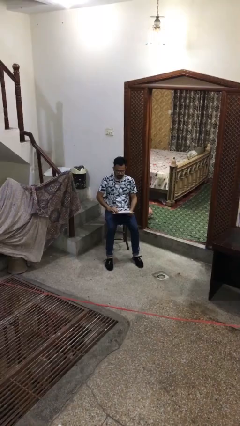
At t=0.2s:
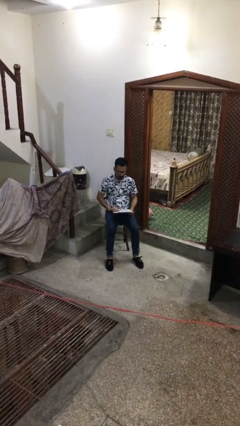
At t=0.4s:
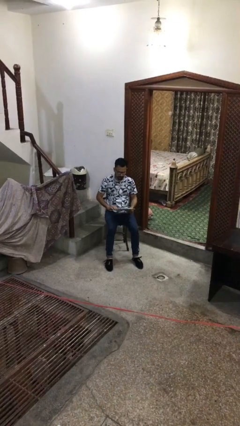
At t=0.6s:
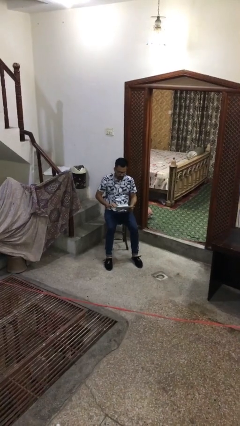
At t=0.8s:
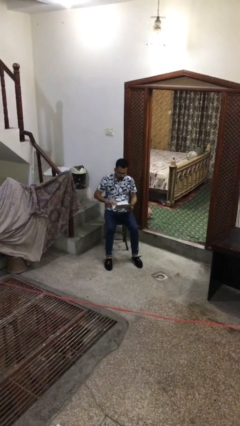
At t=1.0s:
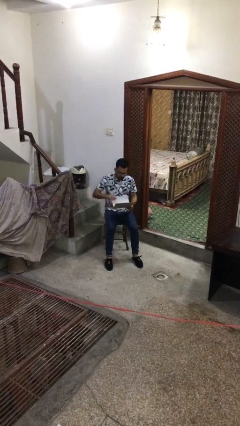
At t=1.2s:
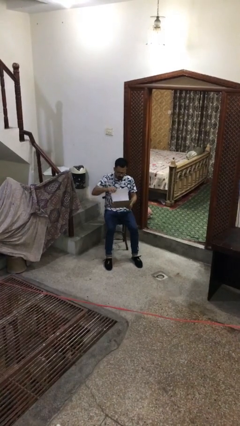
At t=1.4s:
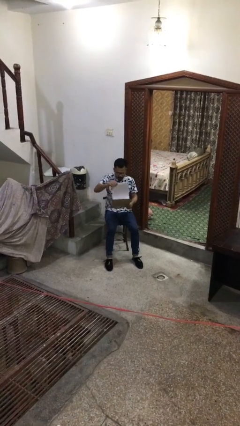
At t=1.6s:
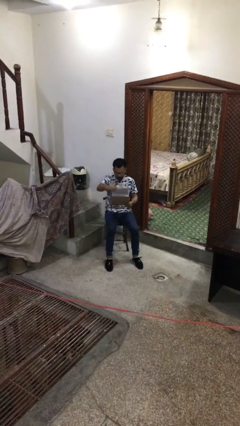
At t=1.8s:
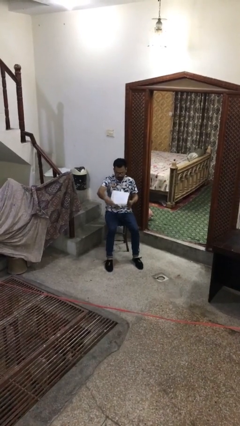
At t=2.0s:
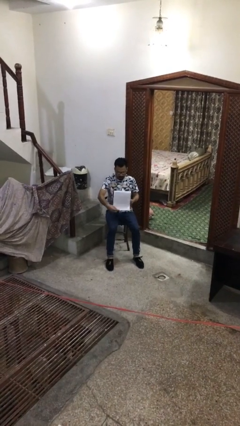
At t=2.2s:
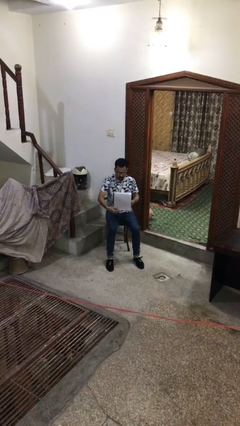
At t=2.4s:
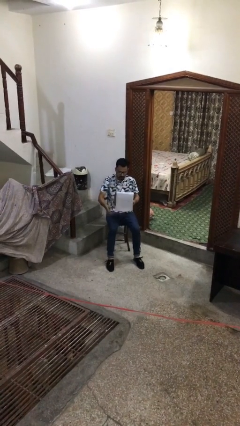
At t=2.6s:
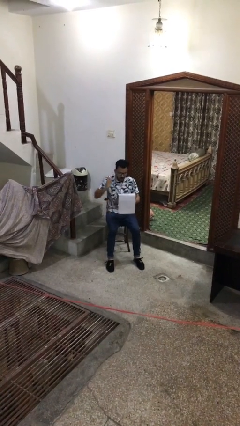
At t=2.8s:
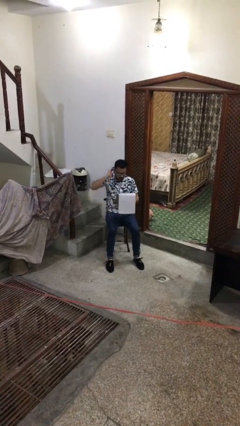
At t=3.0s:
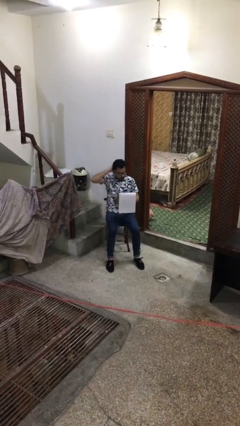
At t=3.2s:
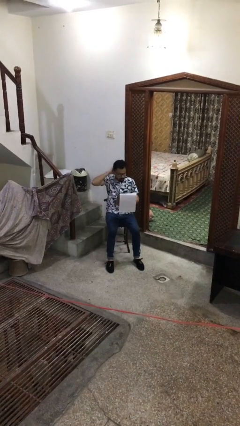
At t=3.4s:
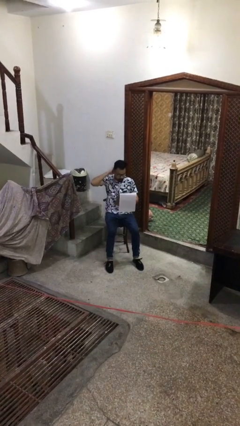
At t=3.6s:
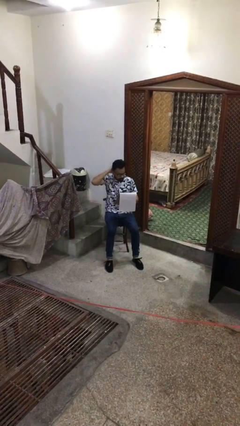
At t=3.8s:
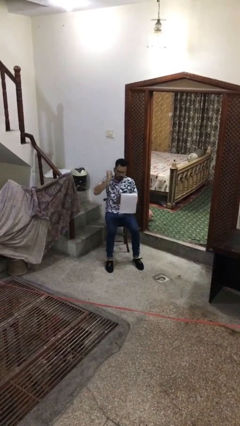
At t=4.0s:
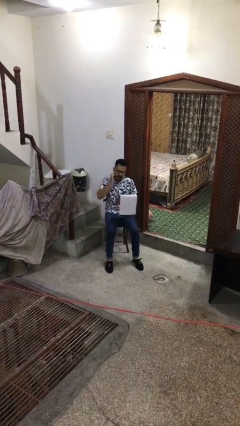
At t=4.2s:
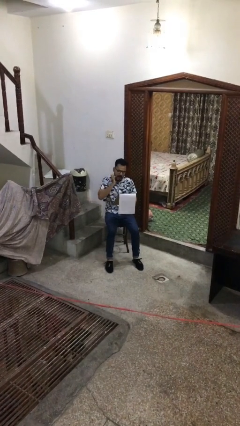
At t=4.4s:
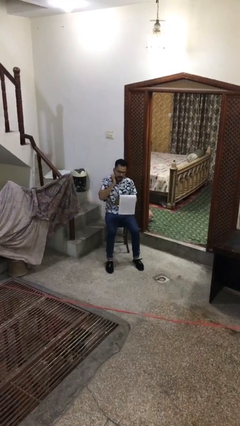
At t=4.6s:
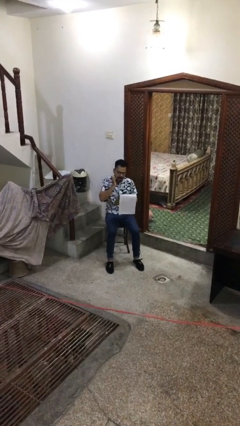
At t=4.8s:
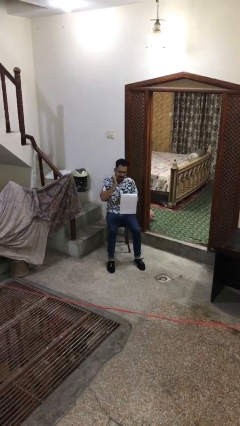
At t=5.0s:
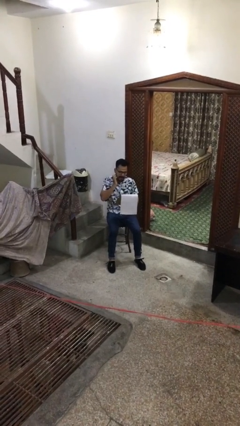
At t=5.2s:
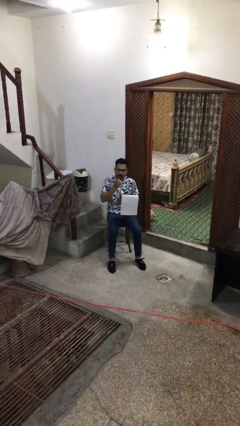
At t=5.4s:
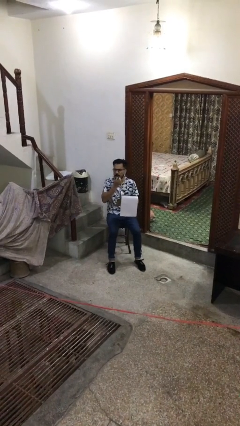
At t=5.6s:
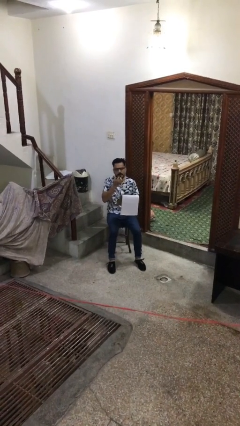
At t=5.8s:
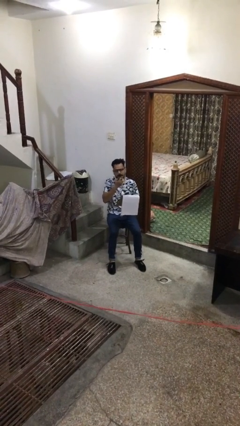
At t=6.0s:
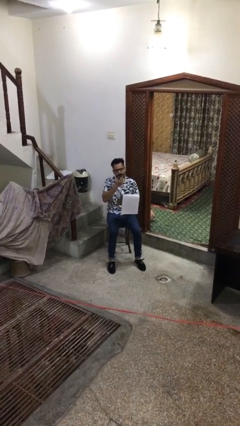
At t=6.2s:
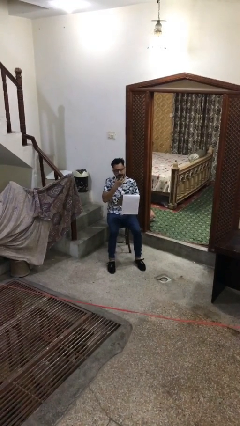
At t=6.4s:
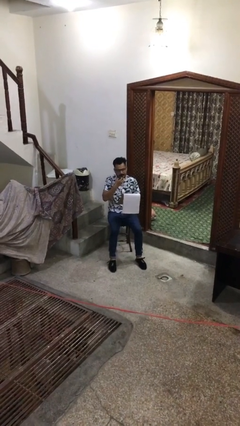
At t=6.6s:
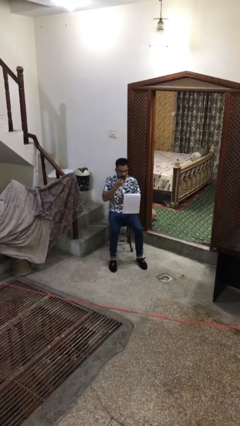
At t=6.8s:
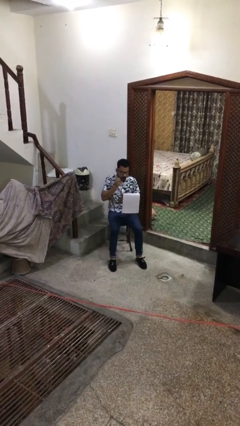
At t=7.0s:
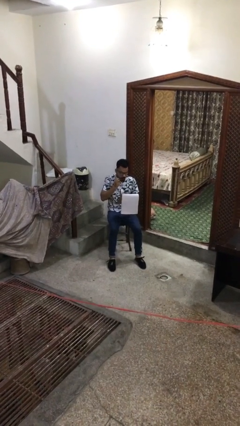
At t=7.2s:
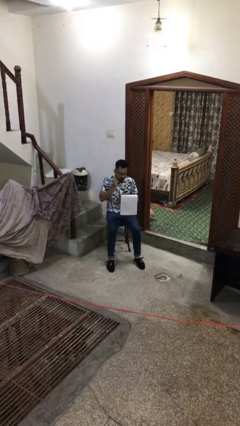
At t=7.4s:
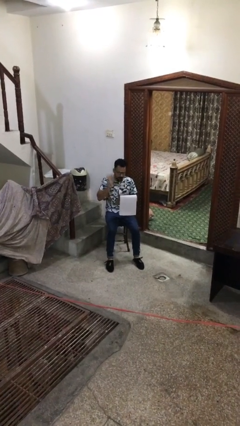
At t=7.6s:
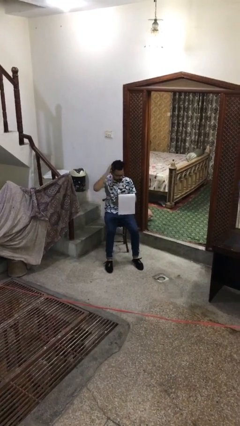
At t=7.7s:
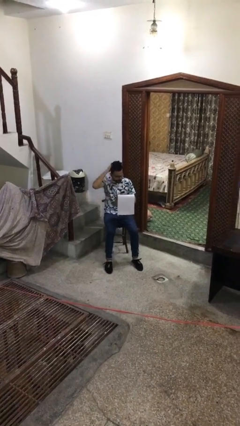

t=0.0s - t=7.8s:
person reads document

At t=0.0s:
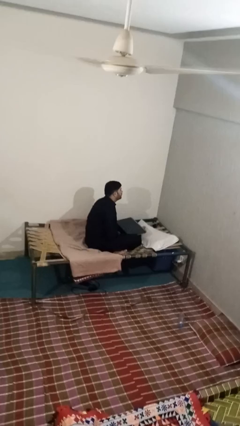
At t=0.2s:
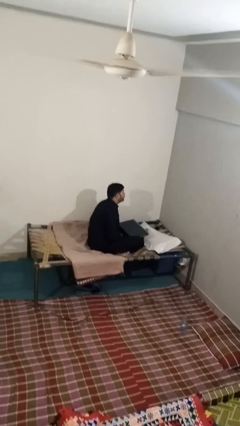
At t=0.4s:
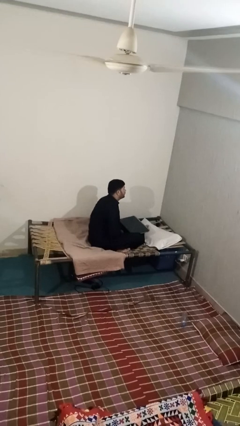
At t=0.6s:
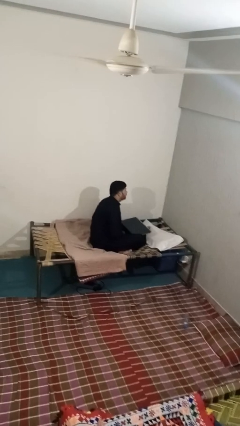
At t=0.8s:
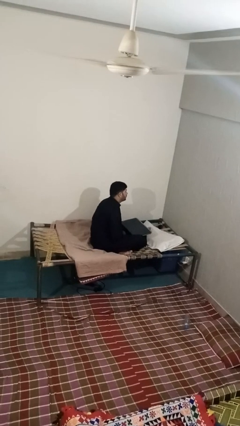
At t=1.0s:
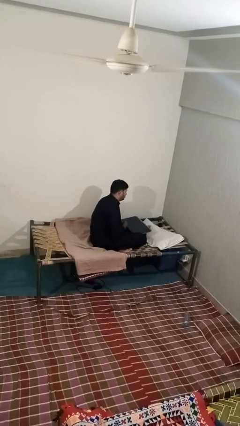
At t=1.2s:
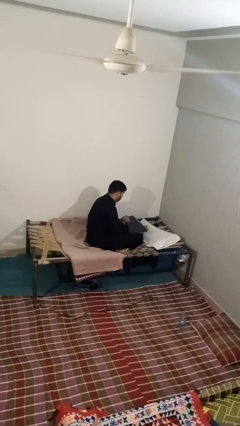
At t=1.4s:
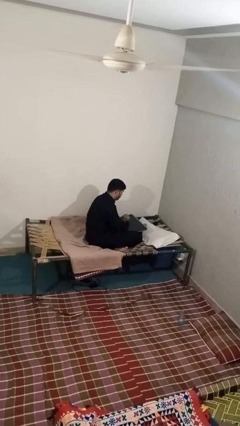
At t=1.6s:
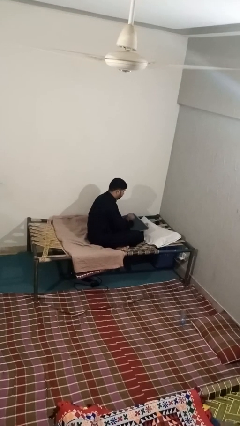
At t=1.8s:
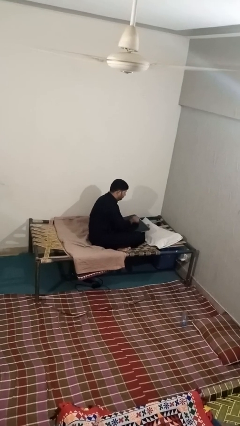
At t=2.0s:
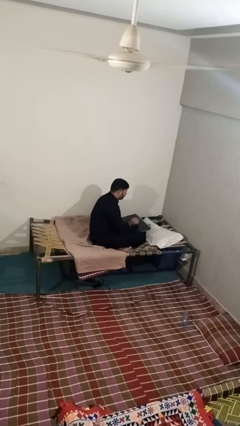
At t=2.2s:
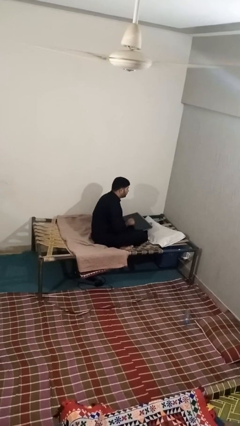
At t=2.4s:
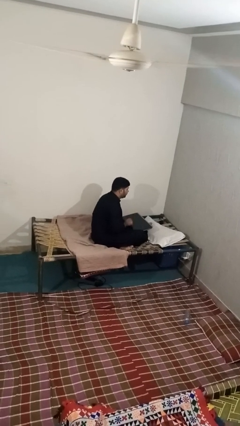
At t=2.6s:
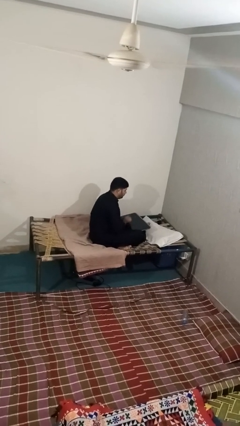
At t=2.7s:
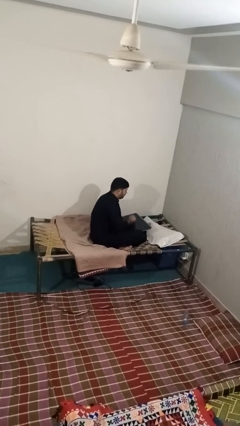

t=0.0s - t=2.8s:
person interacts with tablet

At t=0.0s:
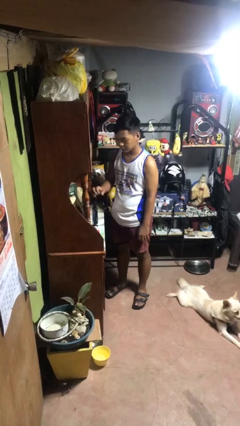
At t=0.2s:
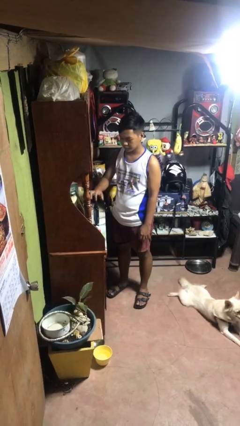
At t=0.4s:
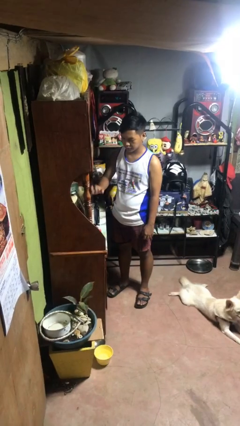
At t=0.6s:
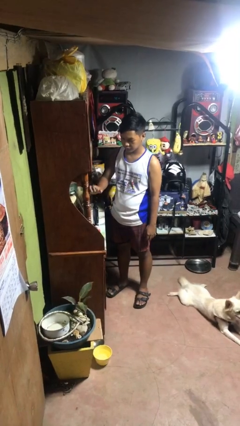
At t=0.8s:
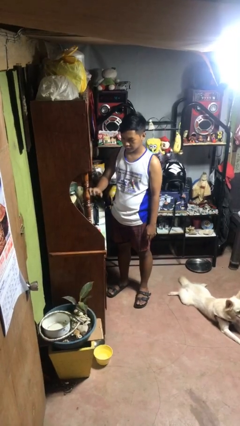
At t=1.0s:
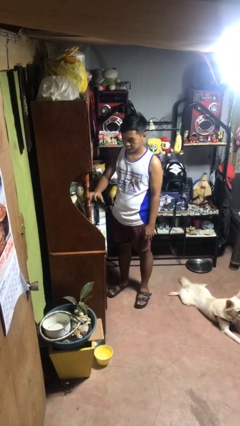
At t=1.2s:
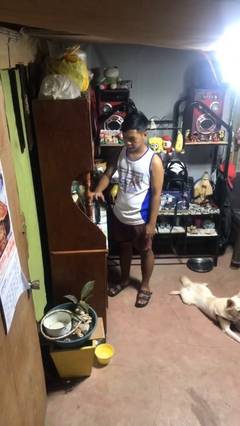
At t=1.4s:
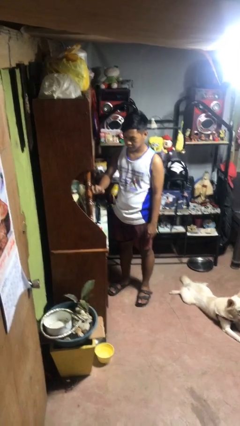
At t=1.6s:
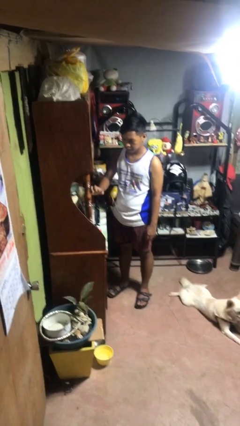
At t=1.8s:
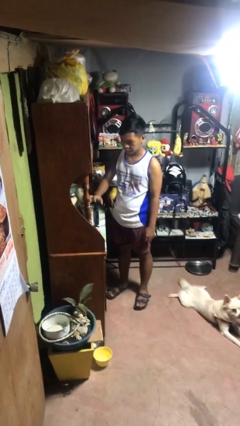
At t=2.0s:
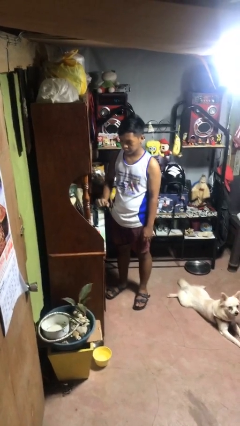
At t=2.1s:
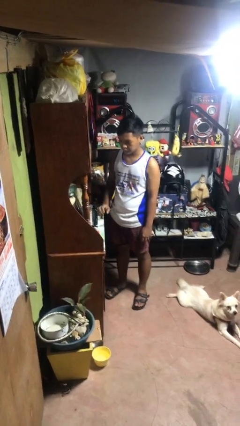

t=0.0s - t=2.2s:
person taps object with finger

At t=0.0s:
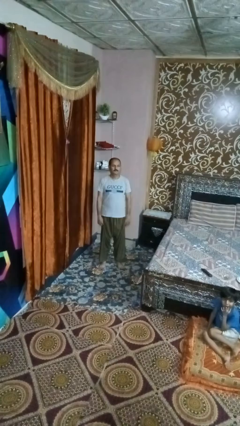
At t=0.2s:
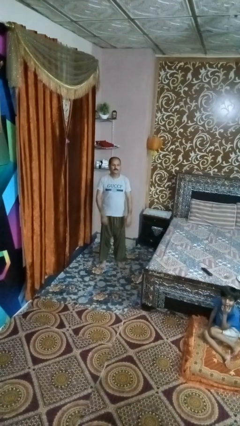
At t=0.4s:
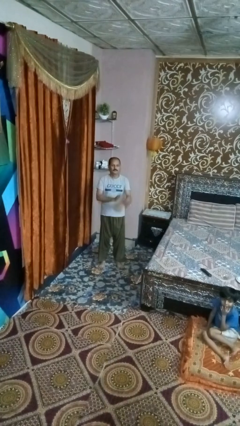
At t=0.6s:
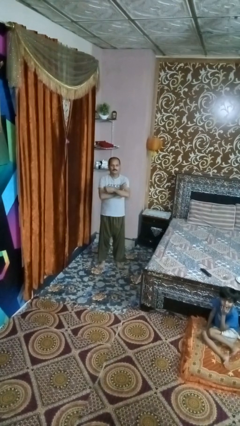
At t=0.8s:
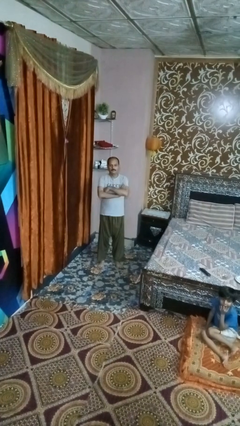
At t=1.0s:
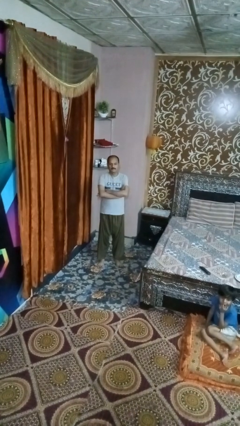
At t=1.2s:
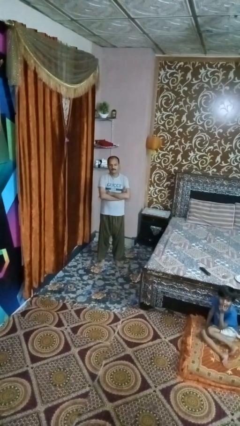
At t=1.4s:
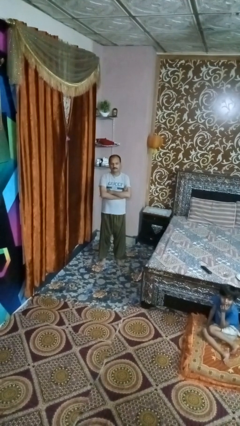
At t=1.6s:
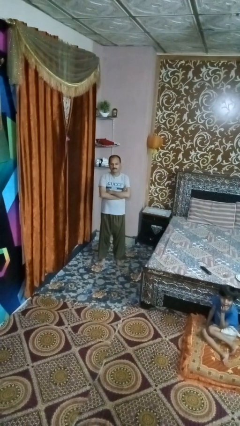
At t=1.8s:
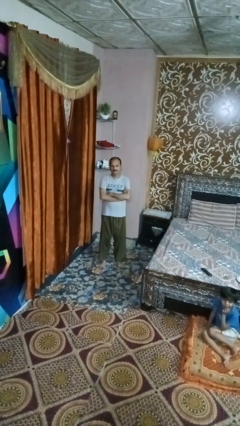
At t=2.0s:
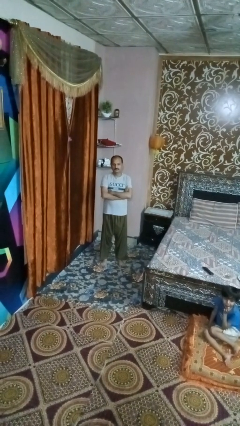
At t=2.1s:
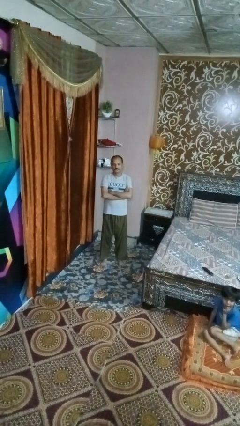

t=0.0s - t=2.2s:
person crosses arms

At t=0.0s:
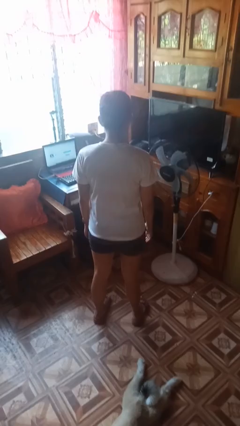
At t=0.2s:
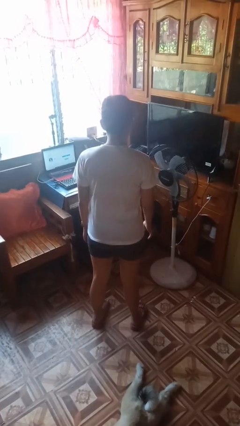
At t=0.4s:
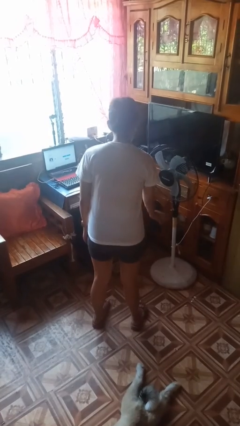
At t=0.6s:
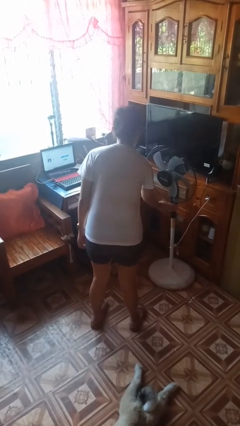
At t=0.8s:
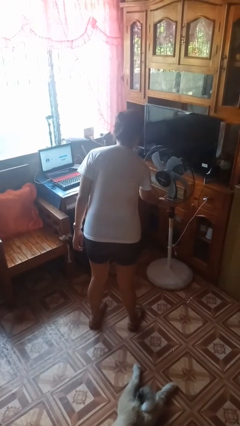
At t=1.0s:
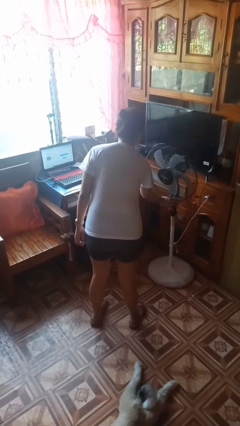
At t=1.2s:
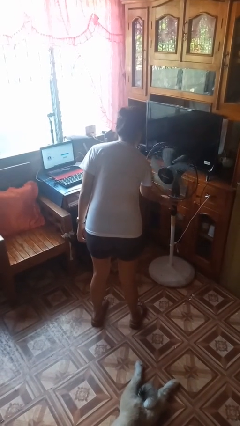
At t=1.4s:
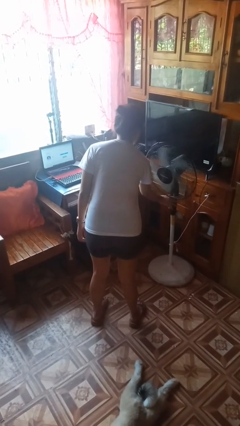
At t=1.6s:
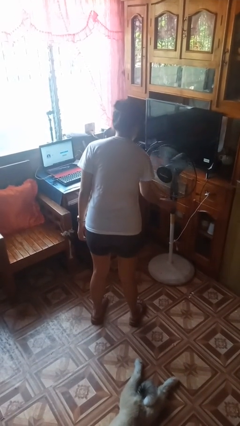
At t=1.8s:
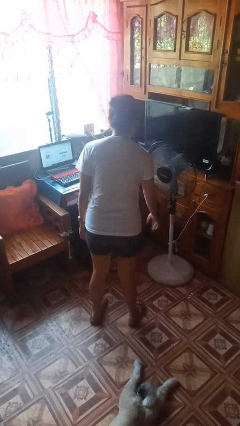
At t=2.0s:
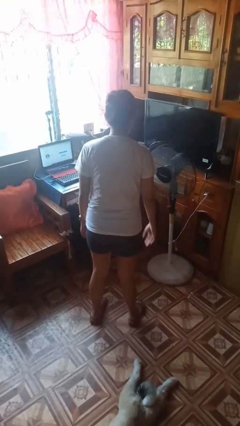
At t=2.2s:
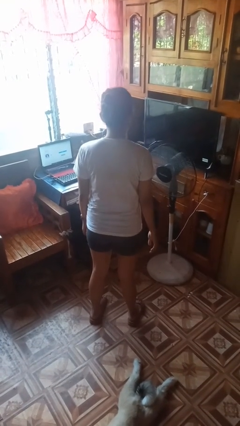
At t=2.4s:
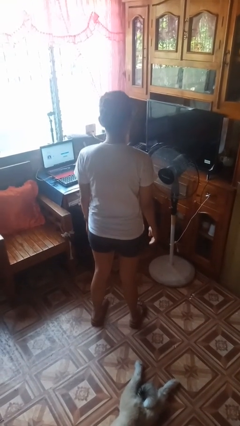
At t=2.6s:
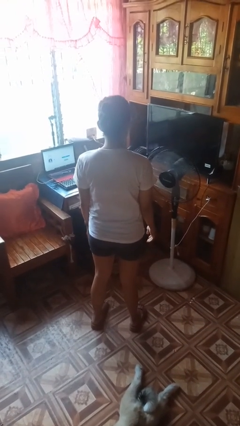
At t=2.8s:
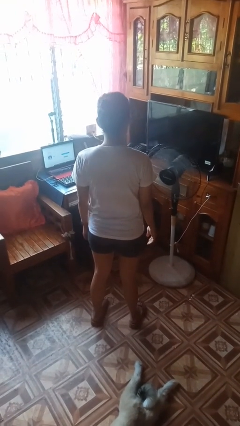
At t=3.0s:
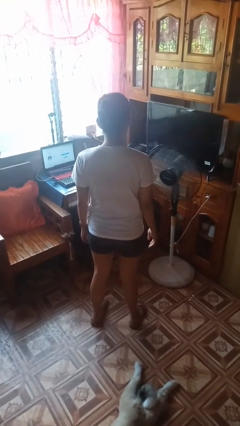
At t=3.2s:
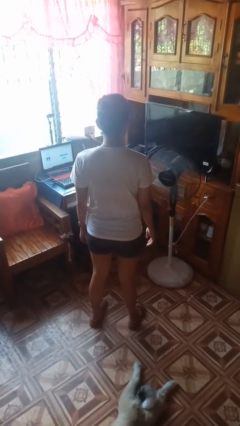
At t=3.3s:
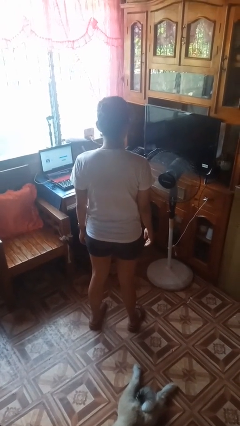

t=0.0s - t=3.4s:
person turns on fan
